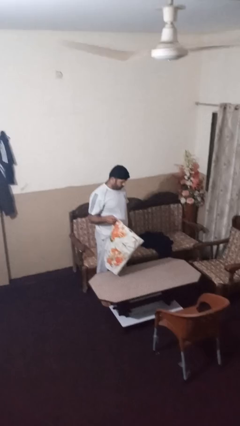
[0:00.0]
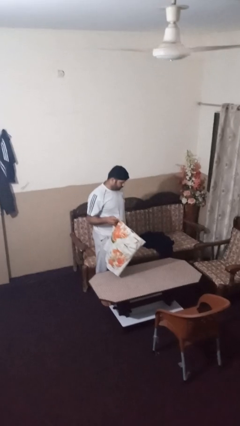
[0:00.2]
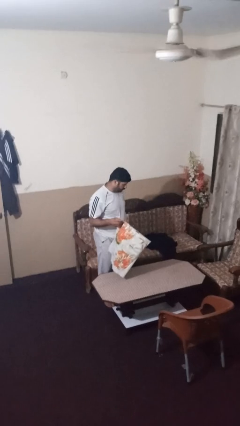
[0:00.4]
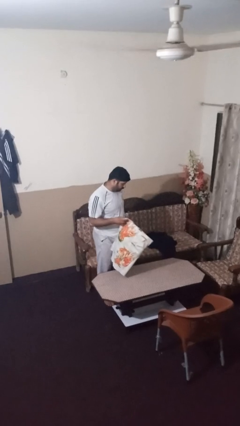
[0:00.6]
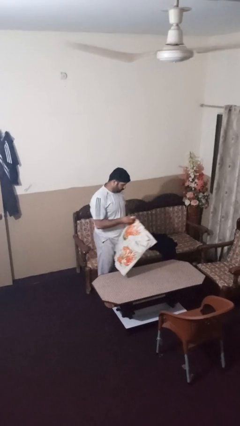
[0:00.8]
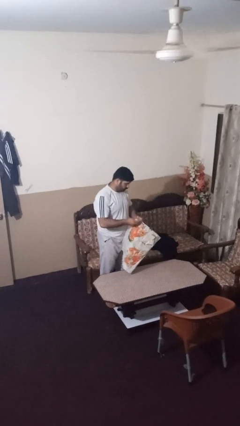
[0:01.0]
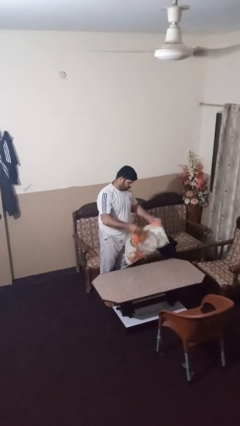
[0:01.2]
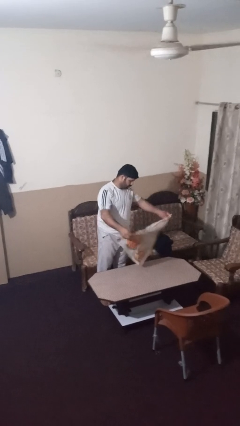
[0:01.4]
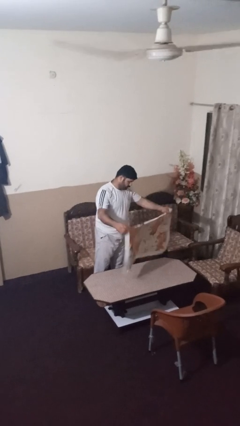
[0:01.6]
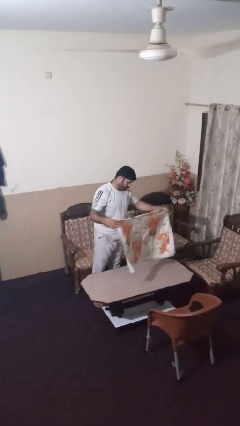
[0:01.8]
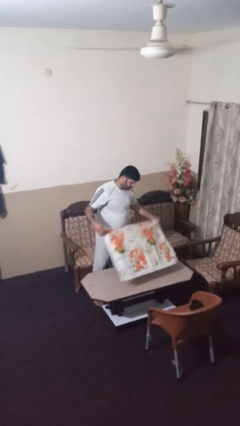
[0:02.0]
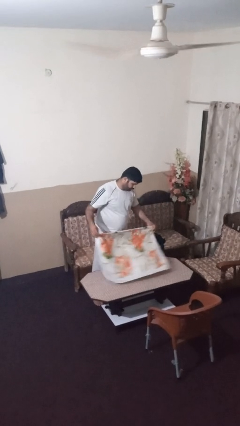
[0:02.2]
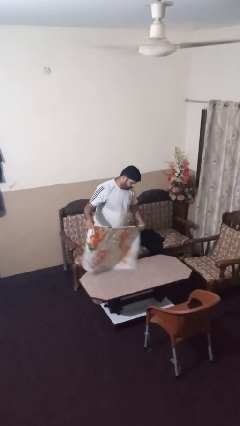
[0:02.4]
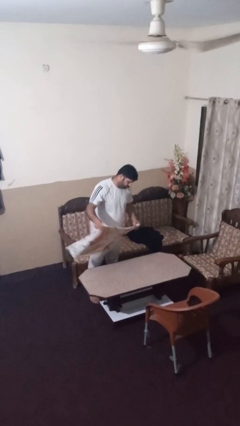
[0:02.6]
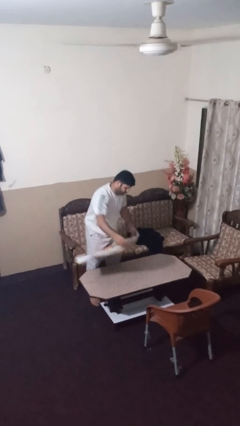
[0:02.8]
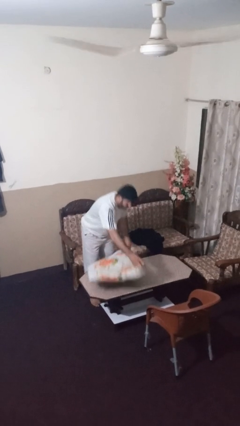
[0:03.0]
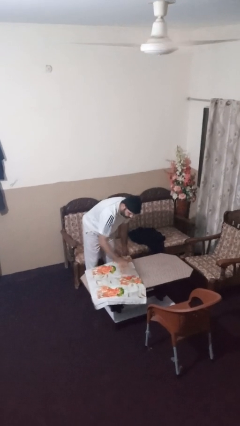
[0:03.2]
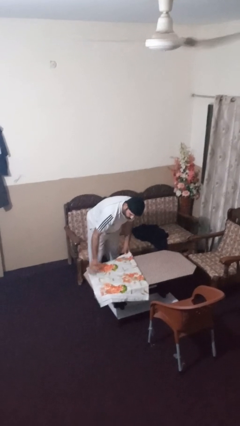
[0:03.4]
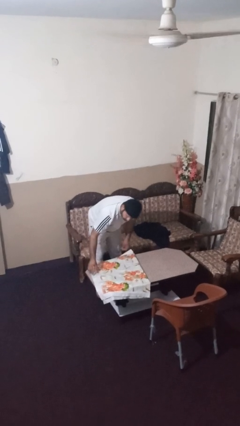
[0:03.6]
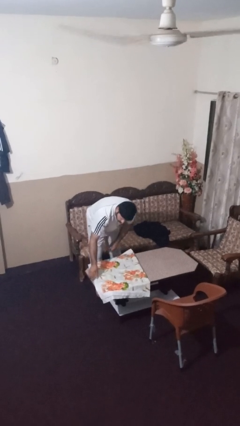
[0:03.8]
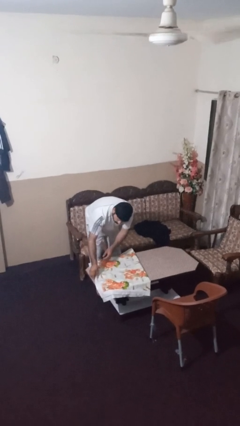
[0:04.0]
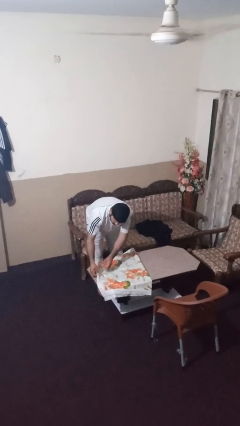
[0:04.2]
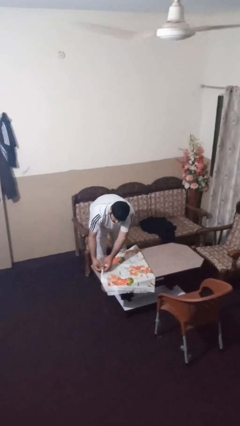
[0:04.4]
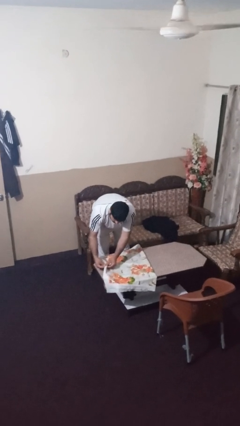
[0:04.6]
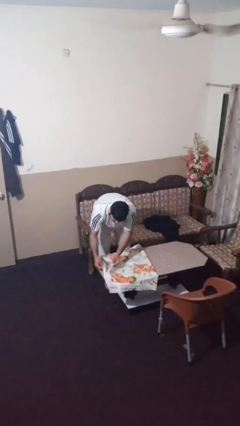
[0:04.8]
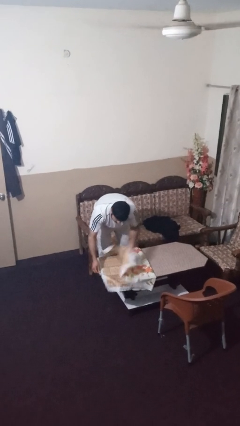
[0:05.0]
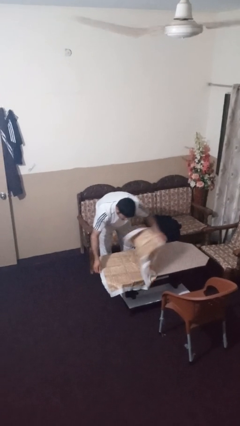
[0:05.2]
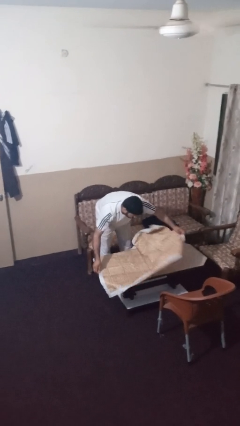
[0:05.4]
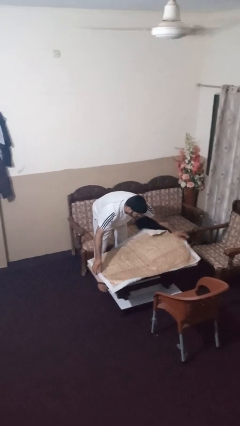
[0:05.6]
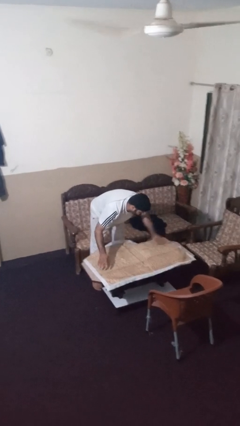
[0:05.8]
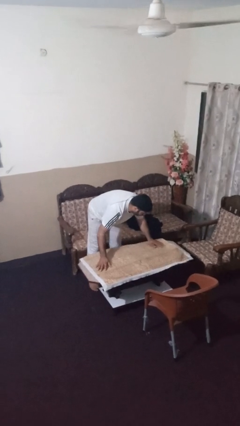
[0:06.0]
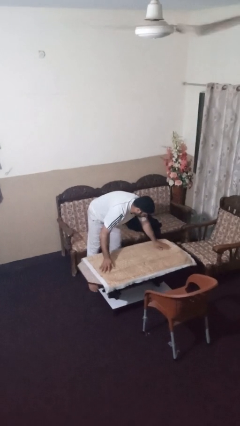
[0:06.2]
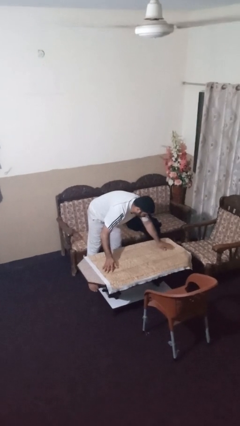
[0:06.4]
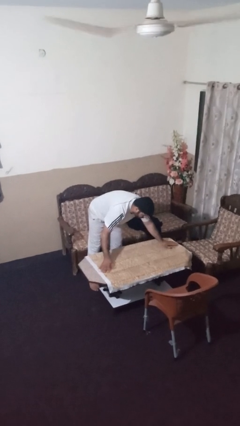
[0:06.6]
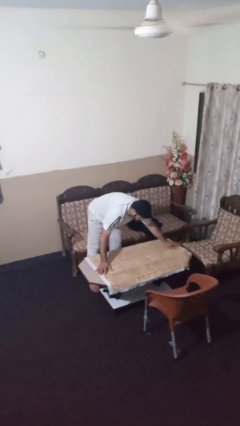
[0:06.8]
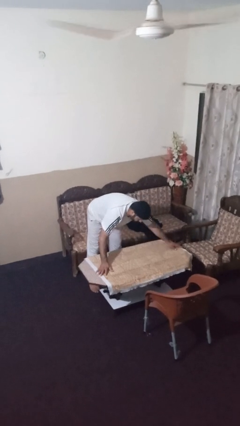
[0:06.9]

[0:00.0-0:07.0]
person spreads tablecloth

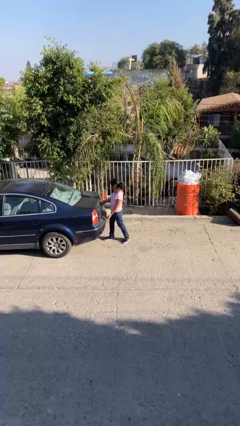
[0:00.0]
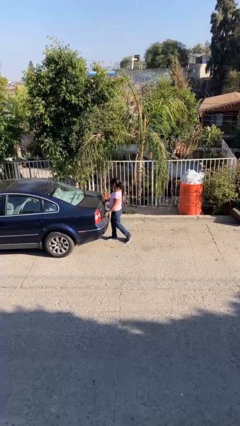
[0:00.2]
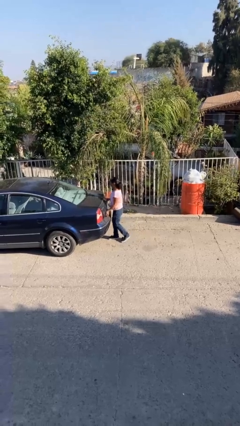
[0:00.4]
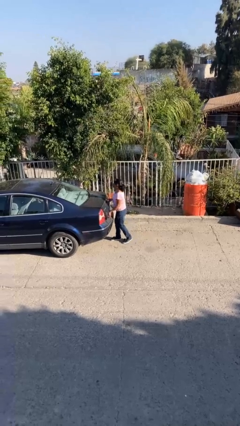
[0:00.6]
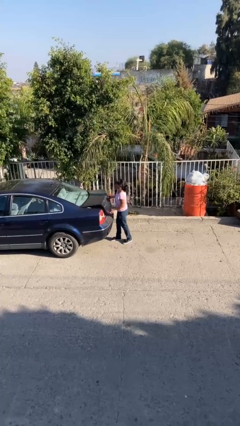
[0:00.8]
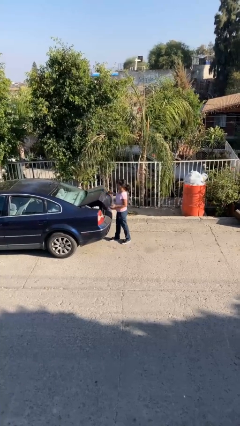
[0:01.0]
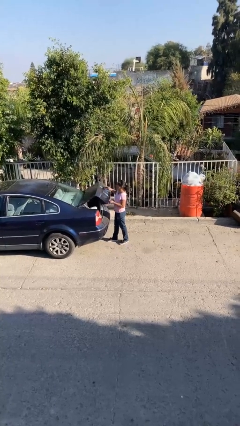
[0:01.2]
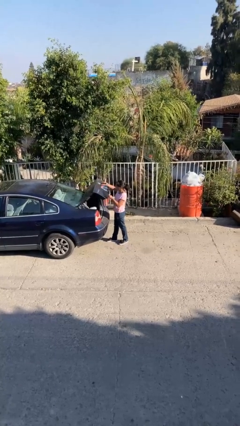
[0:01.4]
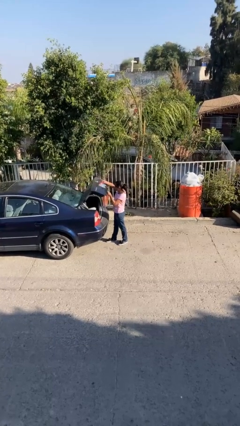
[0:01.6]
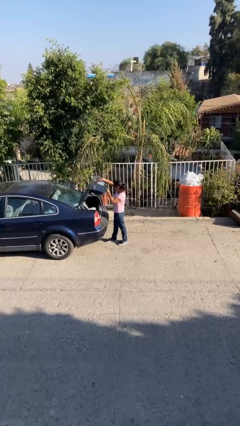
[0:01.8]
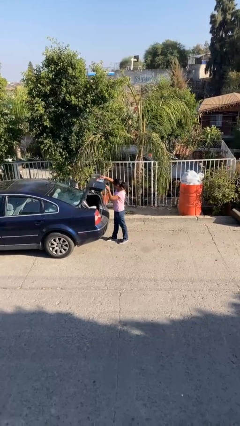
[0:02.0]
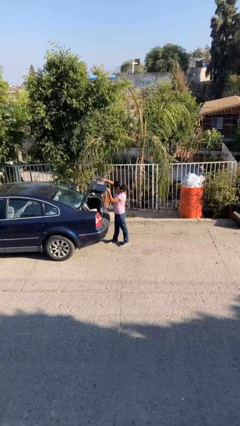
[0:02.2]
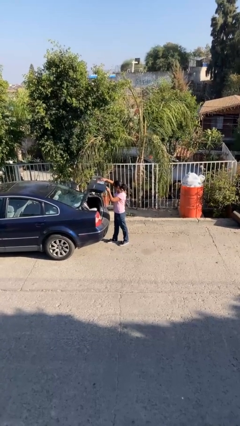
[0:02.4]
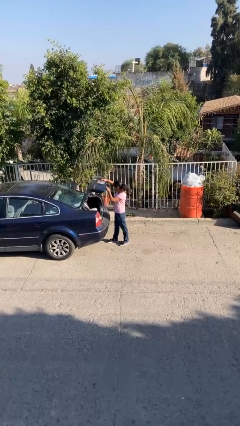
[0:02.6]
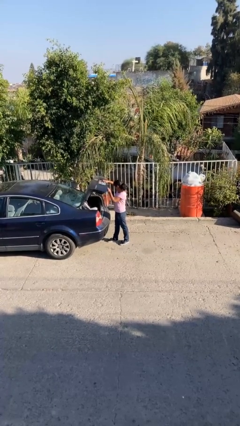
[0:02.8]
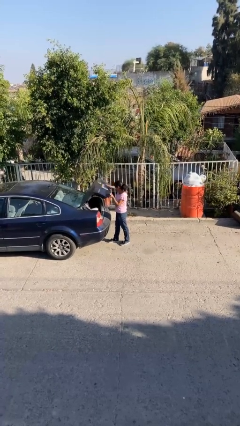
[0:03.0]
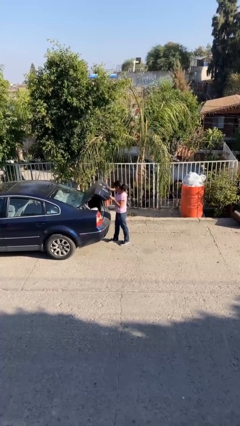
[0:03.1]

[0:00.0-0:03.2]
person opens car trunk

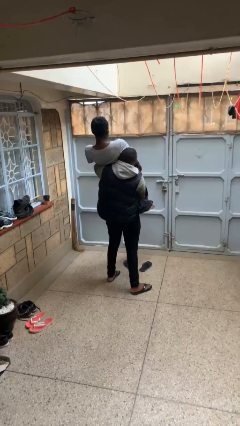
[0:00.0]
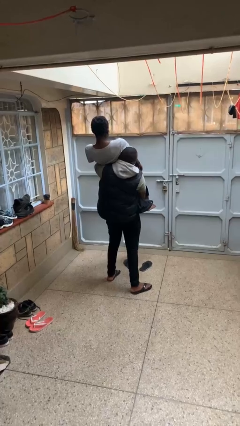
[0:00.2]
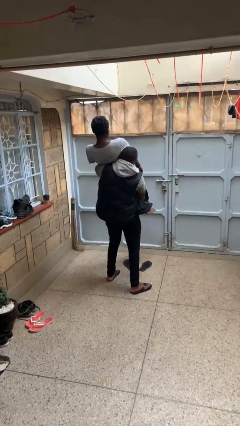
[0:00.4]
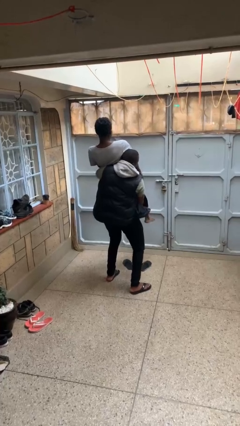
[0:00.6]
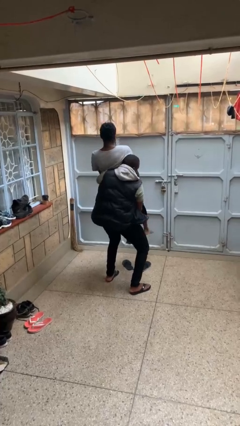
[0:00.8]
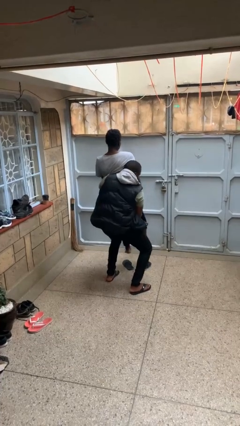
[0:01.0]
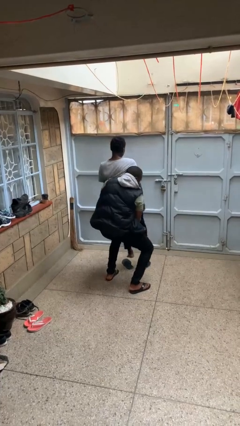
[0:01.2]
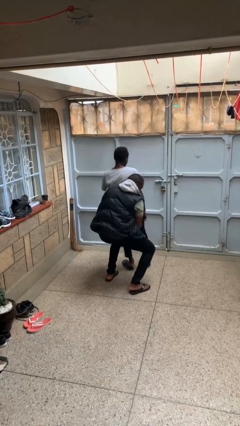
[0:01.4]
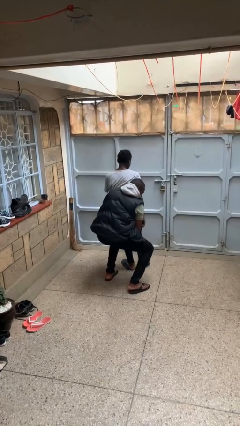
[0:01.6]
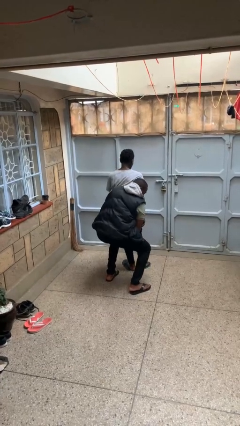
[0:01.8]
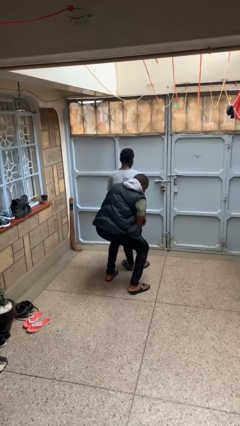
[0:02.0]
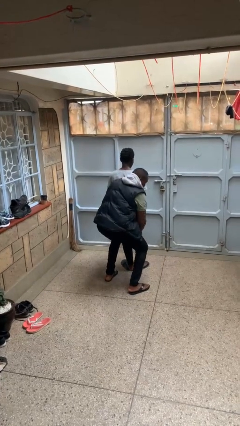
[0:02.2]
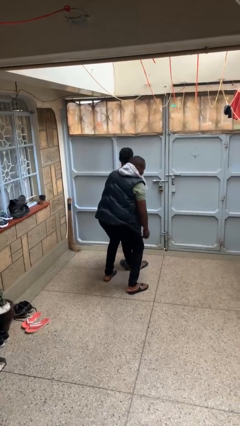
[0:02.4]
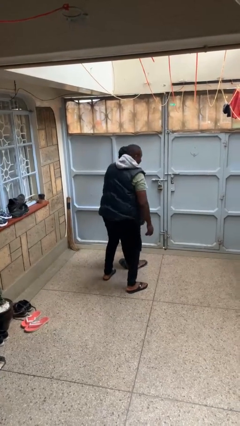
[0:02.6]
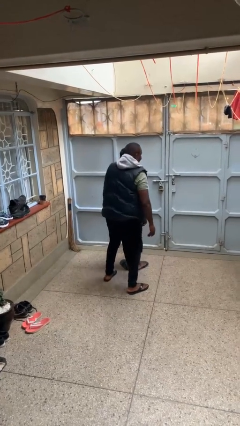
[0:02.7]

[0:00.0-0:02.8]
person puts down person

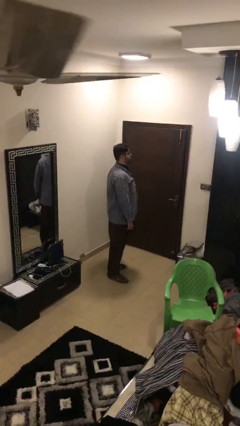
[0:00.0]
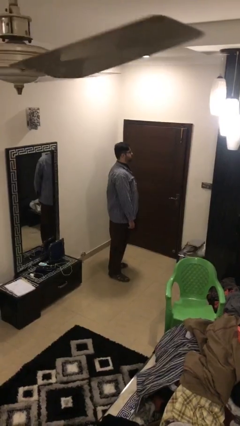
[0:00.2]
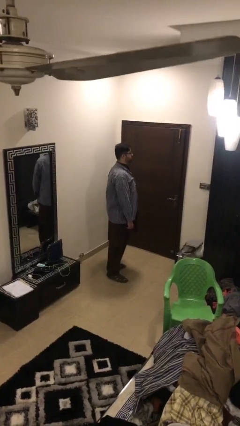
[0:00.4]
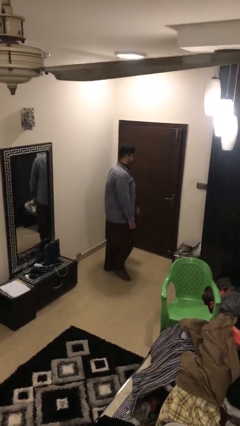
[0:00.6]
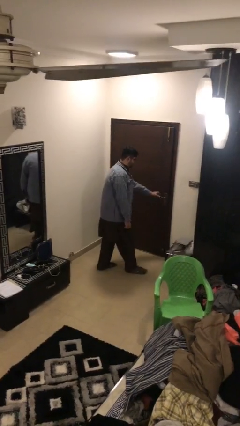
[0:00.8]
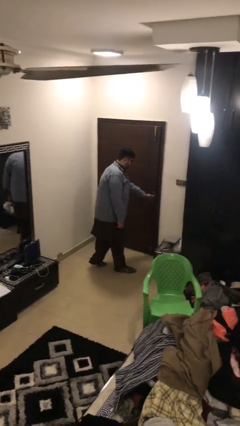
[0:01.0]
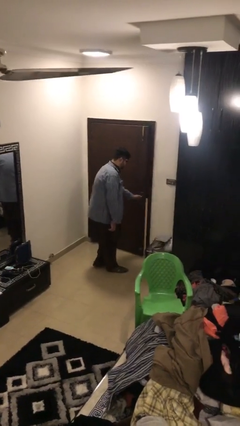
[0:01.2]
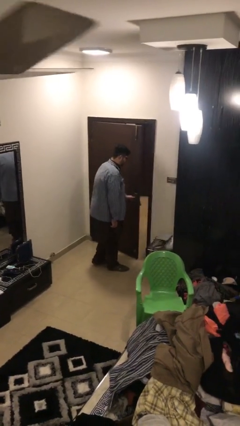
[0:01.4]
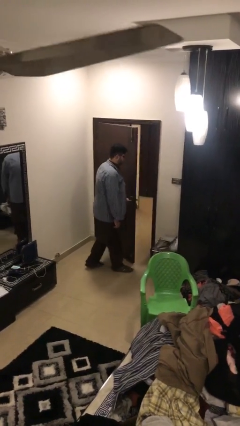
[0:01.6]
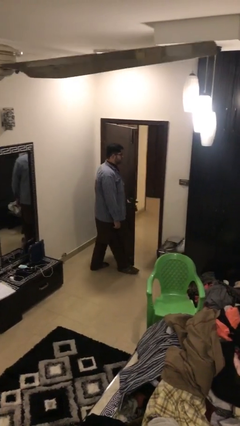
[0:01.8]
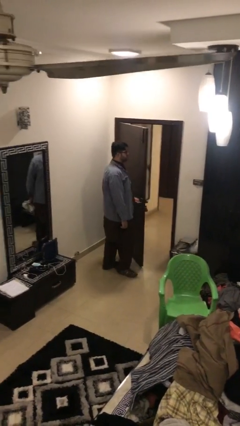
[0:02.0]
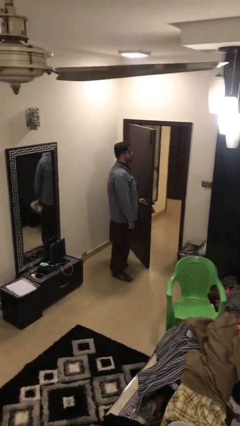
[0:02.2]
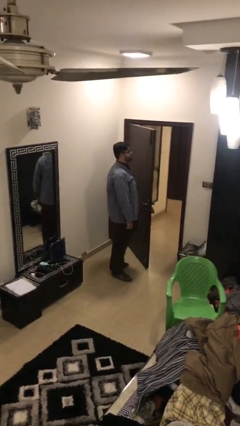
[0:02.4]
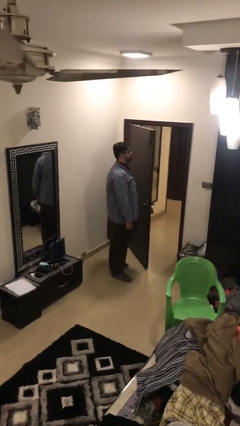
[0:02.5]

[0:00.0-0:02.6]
person opens facility door

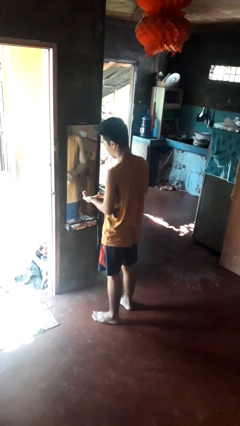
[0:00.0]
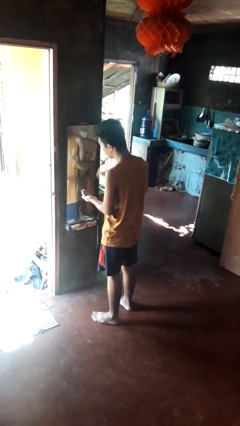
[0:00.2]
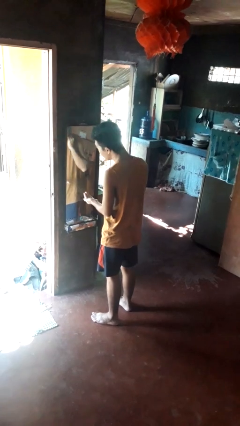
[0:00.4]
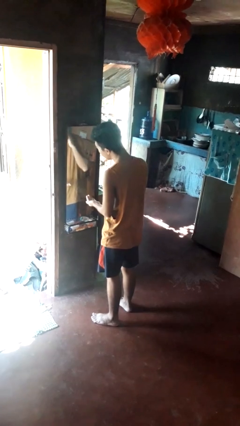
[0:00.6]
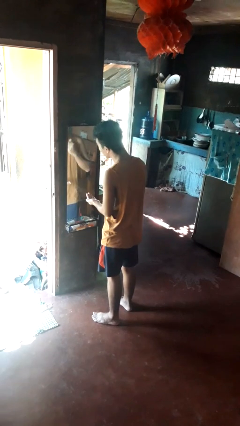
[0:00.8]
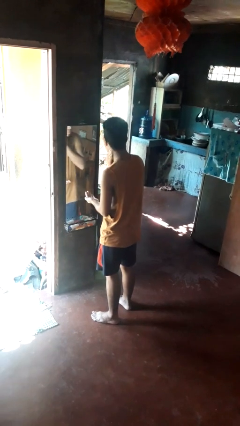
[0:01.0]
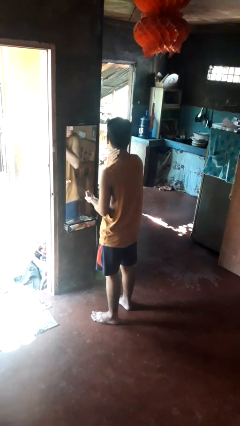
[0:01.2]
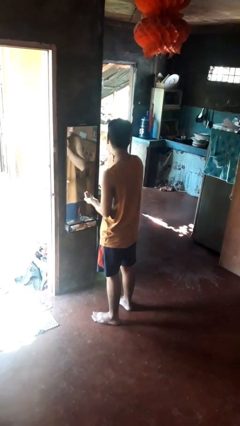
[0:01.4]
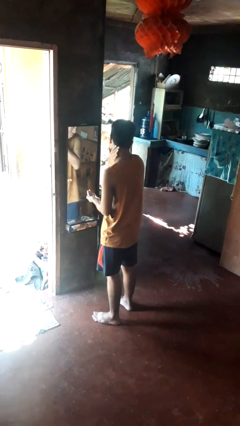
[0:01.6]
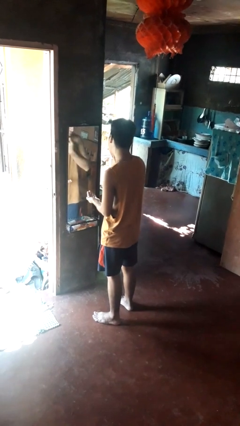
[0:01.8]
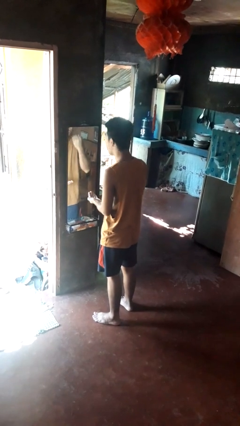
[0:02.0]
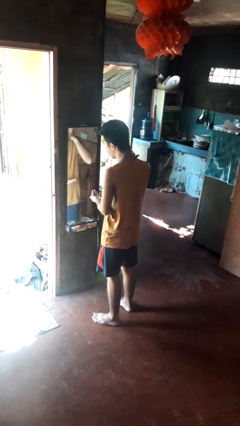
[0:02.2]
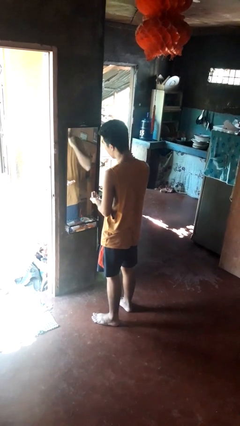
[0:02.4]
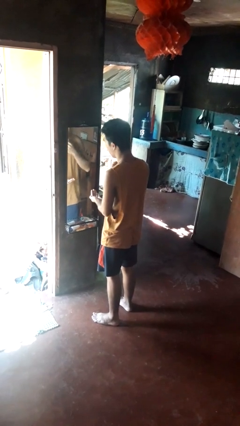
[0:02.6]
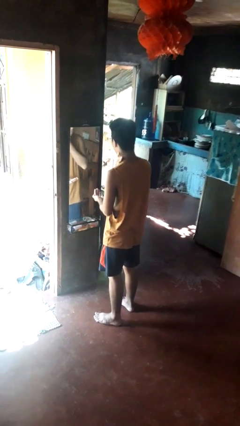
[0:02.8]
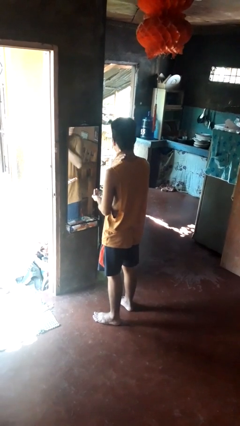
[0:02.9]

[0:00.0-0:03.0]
person applies foundation makeup
